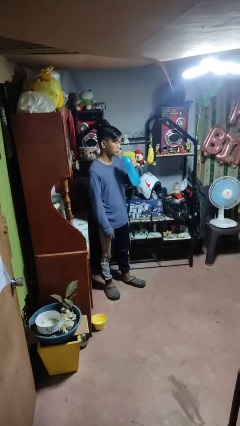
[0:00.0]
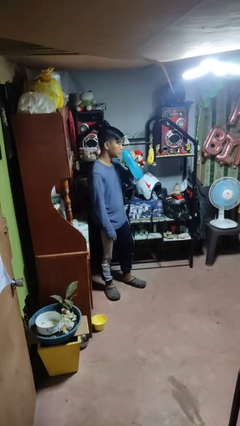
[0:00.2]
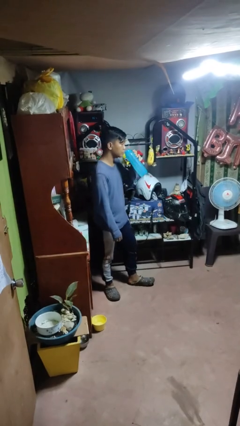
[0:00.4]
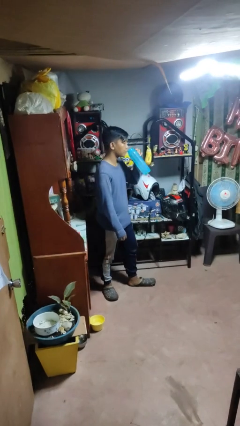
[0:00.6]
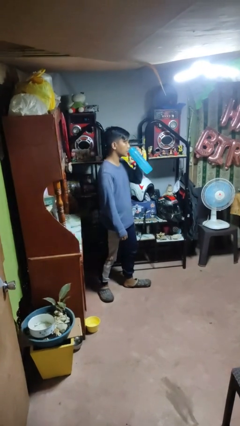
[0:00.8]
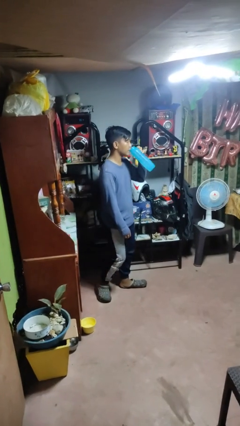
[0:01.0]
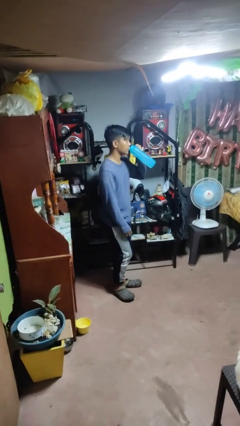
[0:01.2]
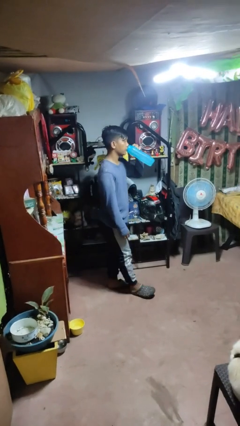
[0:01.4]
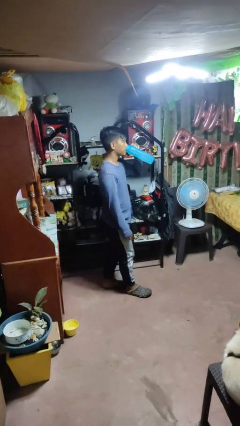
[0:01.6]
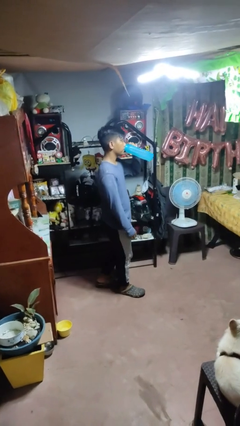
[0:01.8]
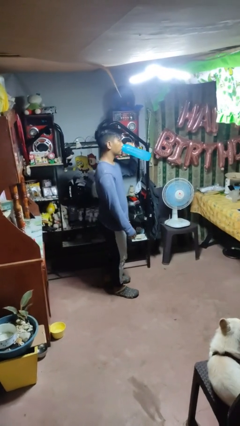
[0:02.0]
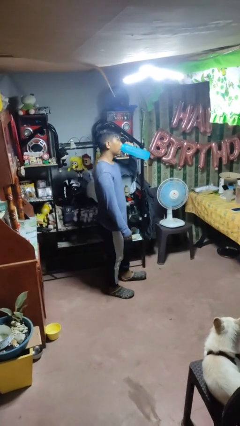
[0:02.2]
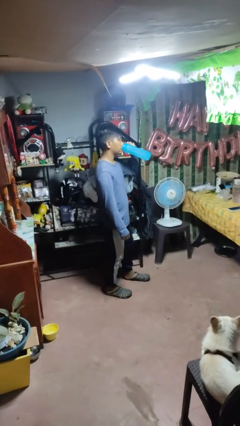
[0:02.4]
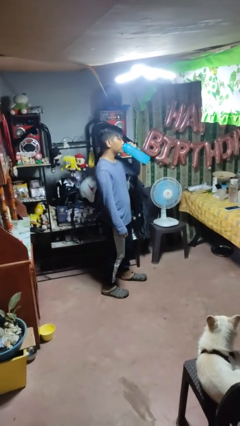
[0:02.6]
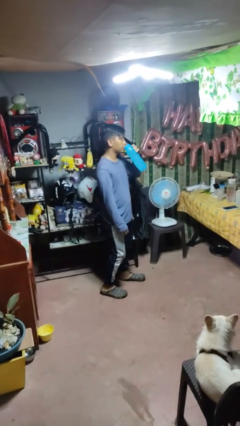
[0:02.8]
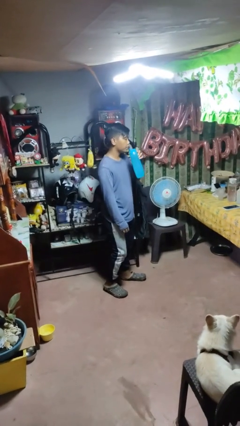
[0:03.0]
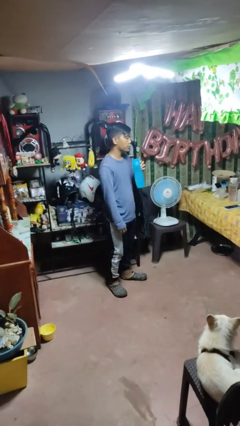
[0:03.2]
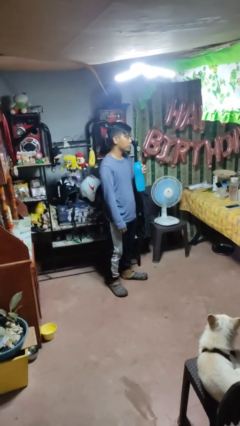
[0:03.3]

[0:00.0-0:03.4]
person drinks from bottle

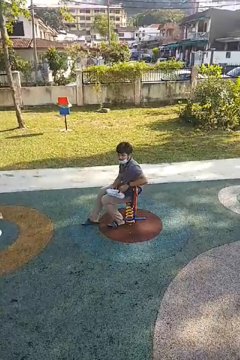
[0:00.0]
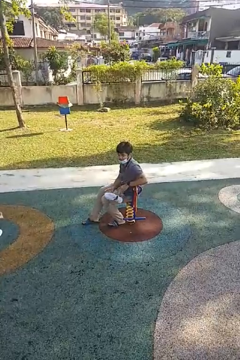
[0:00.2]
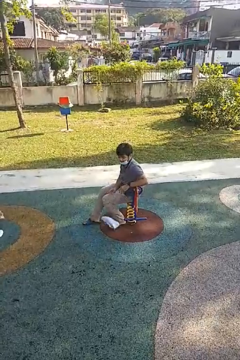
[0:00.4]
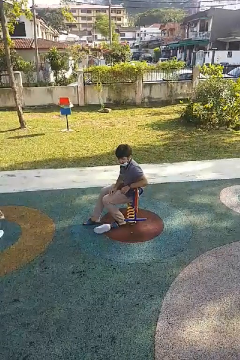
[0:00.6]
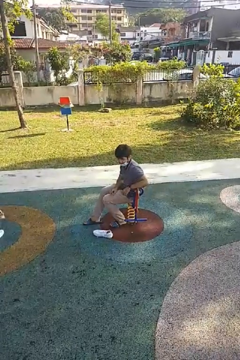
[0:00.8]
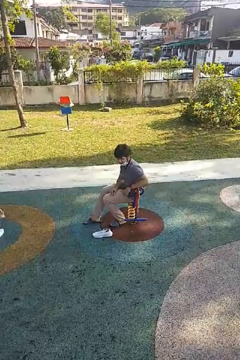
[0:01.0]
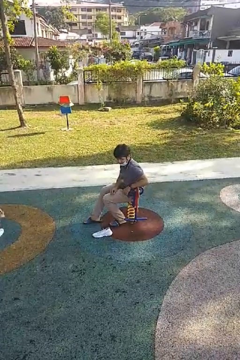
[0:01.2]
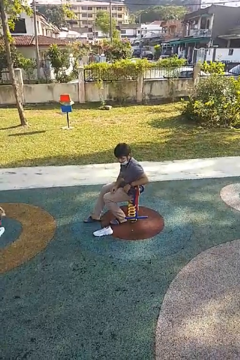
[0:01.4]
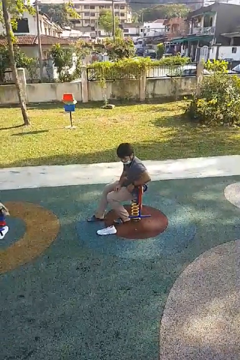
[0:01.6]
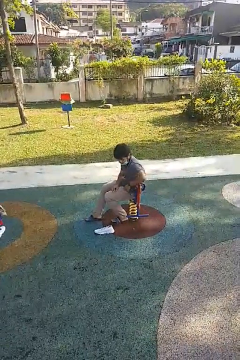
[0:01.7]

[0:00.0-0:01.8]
person drops object

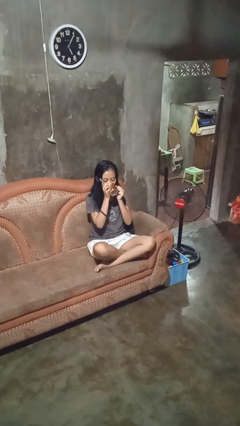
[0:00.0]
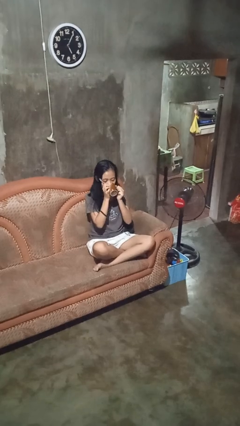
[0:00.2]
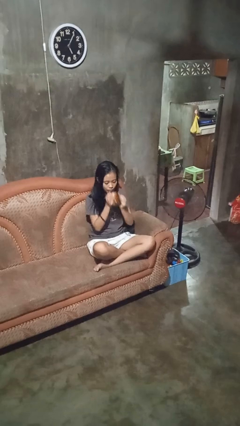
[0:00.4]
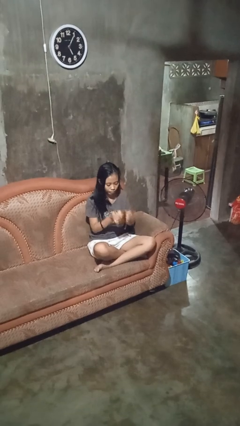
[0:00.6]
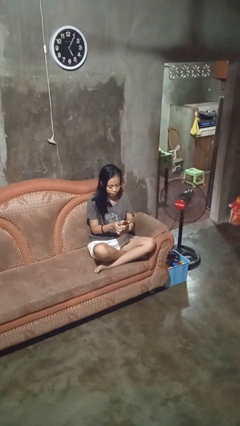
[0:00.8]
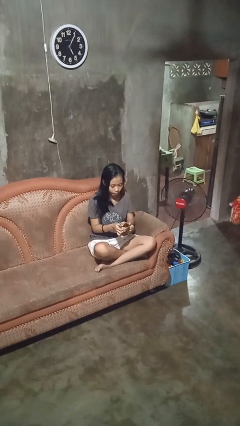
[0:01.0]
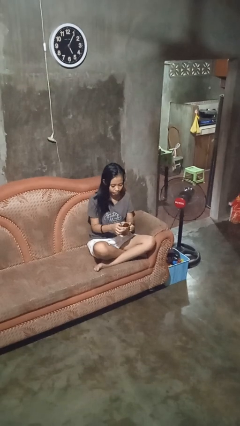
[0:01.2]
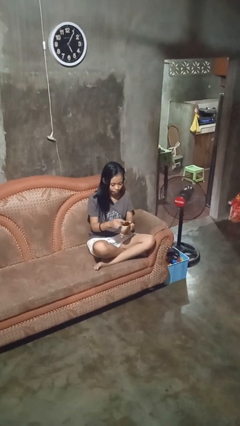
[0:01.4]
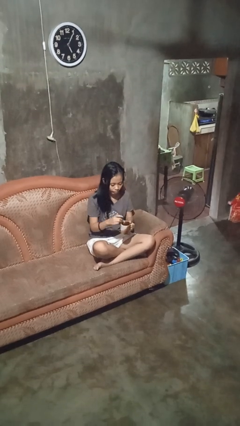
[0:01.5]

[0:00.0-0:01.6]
person stirs mug

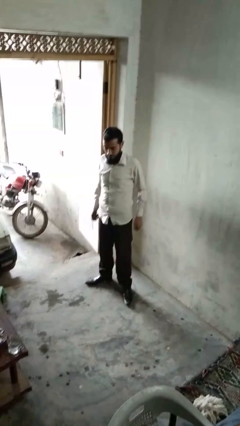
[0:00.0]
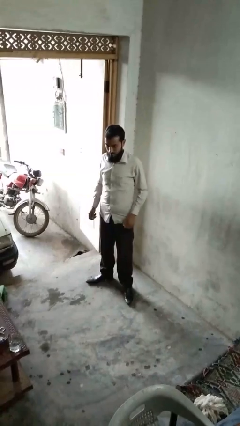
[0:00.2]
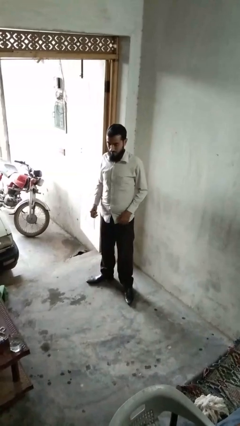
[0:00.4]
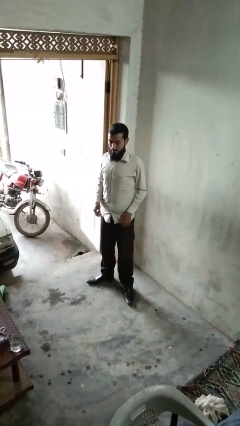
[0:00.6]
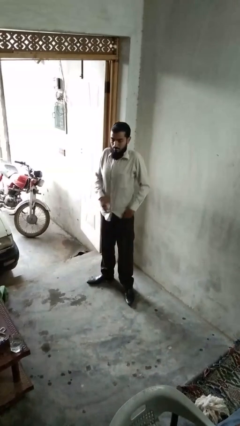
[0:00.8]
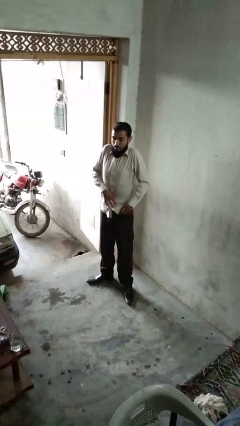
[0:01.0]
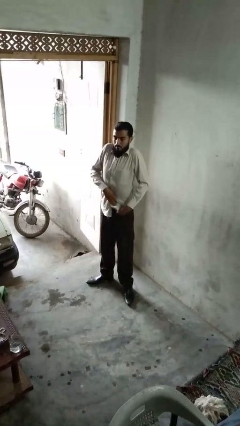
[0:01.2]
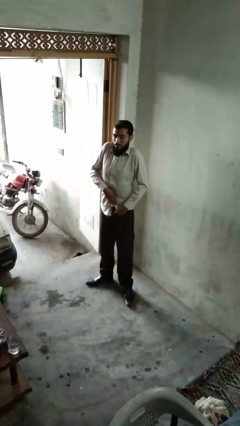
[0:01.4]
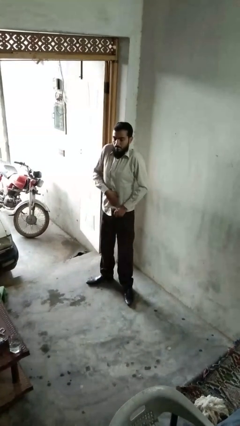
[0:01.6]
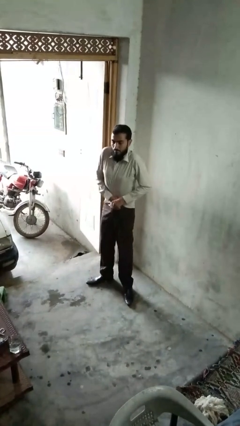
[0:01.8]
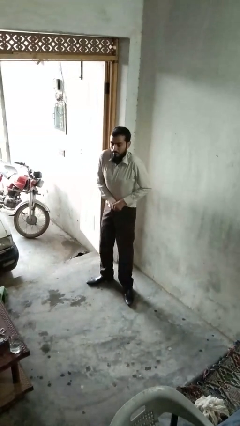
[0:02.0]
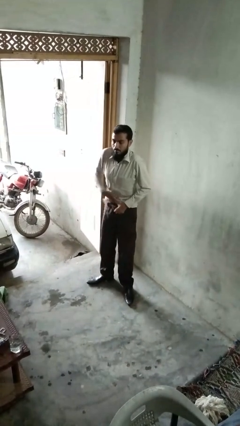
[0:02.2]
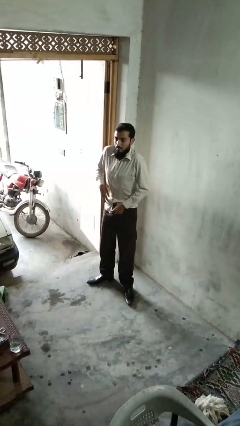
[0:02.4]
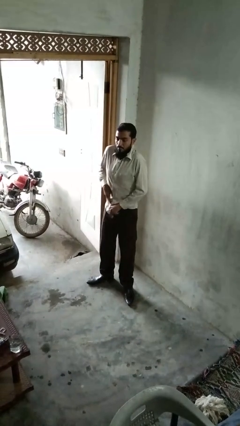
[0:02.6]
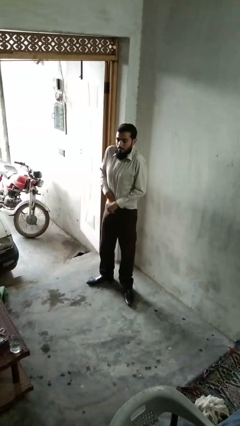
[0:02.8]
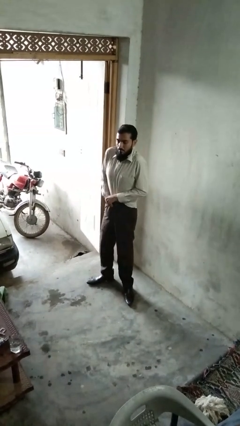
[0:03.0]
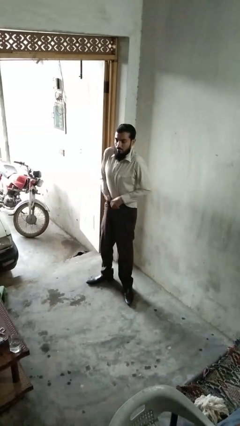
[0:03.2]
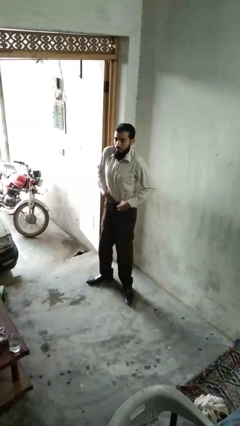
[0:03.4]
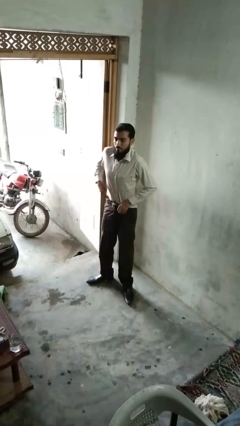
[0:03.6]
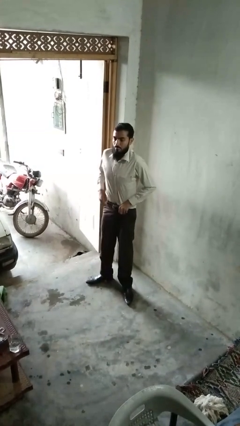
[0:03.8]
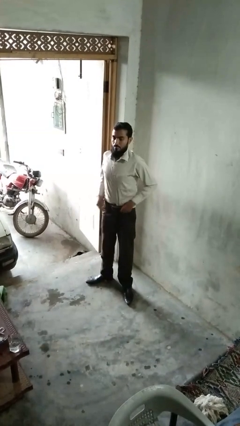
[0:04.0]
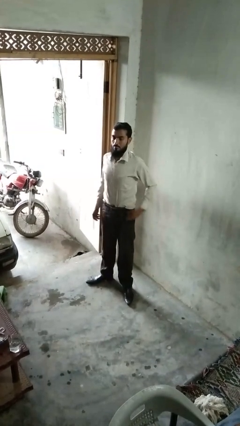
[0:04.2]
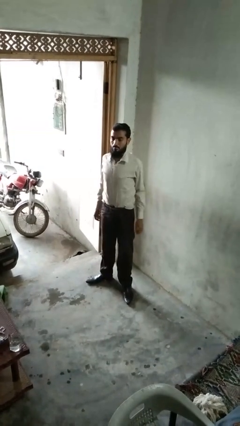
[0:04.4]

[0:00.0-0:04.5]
person tucks in shirt

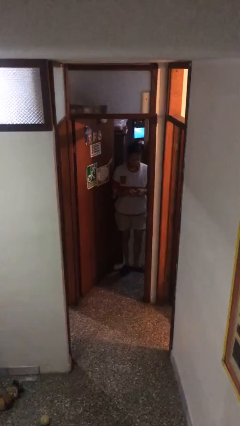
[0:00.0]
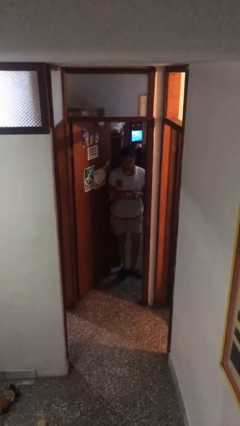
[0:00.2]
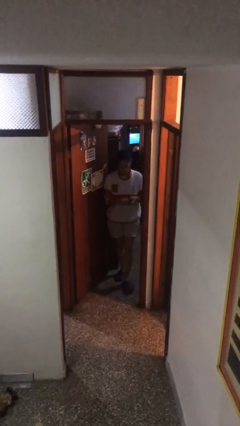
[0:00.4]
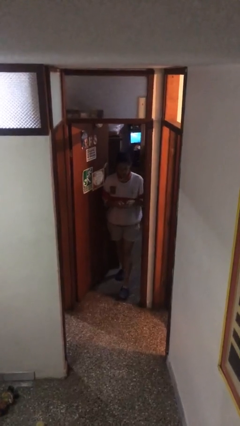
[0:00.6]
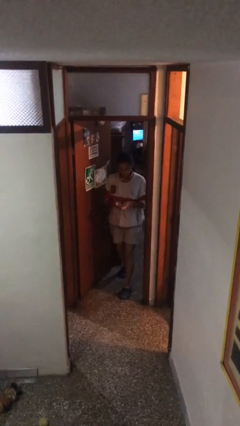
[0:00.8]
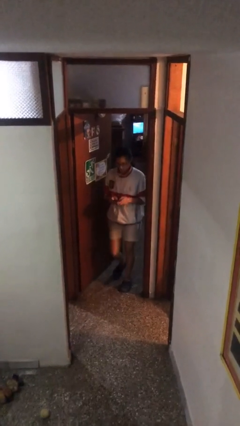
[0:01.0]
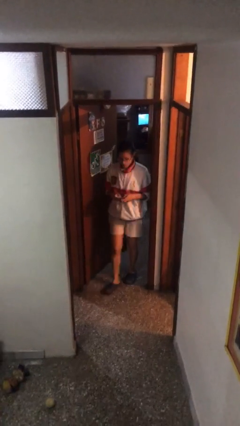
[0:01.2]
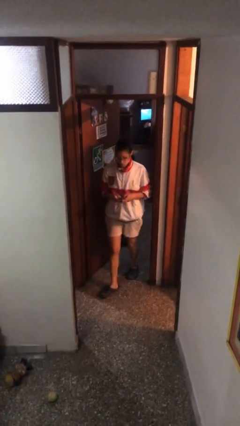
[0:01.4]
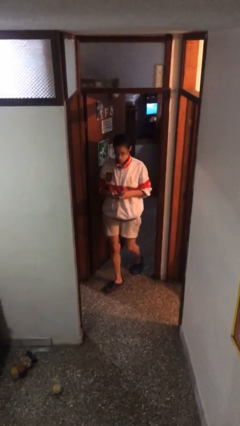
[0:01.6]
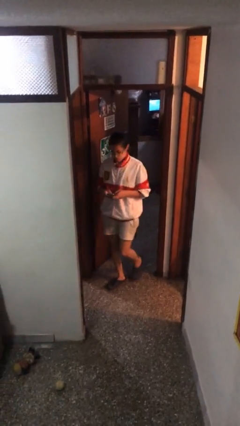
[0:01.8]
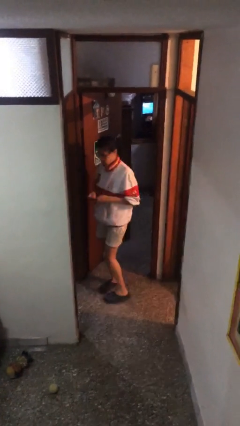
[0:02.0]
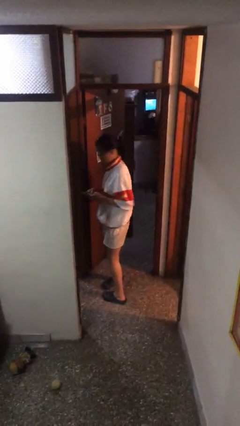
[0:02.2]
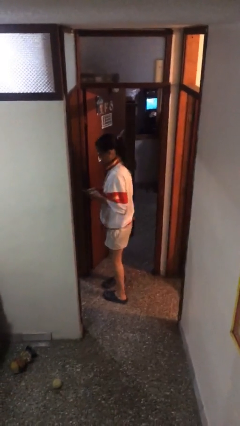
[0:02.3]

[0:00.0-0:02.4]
person enters scene through structure

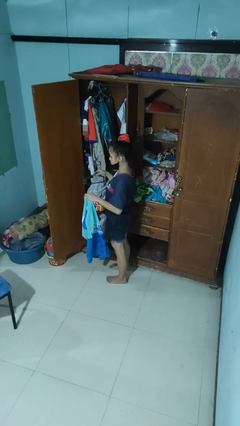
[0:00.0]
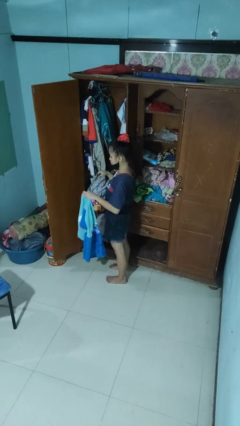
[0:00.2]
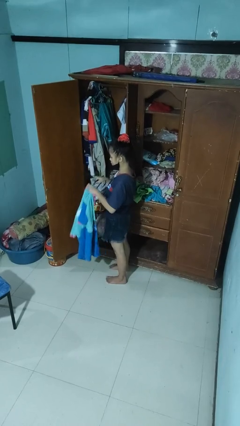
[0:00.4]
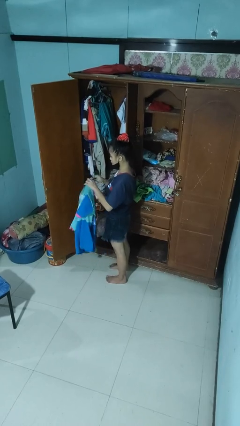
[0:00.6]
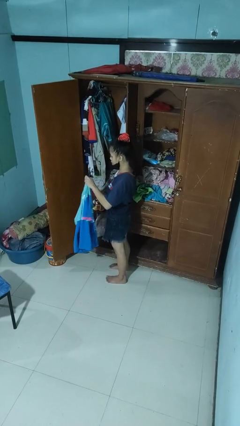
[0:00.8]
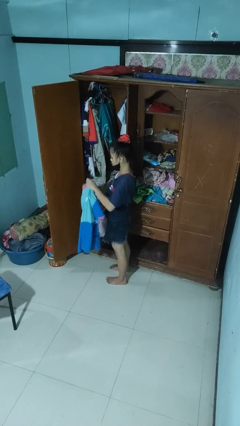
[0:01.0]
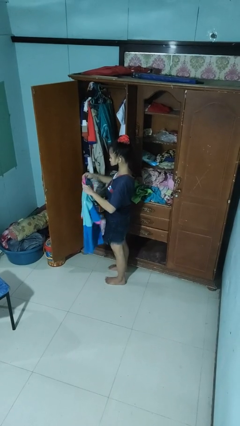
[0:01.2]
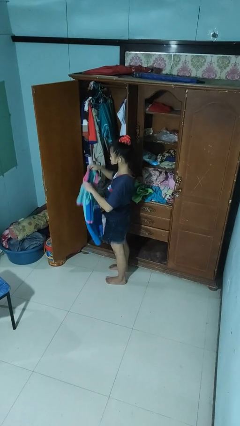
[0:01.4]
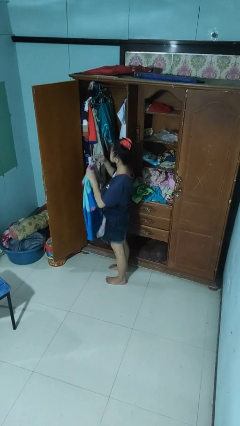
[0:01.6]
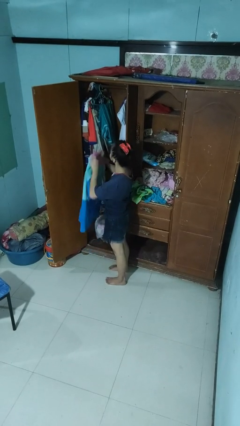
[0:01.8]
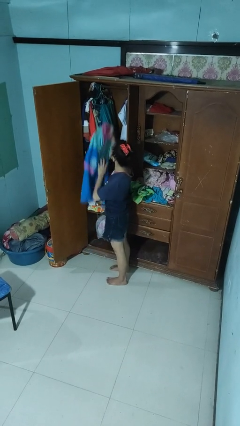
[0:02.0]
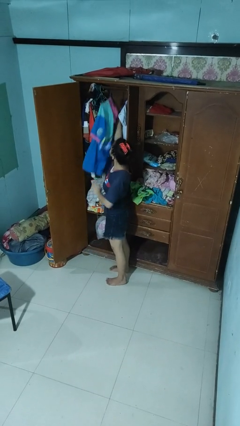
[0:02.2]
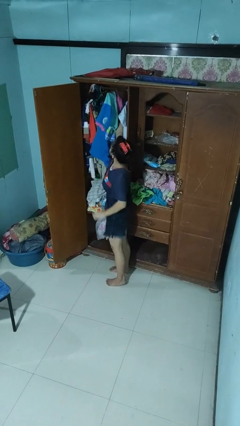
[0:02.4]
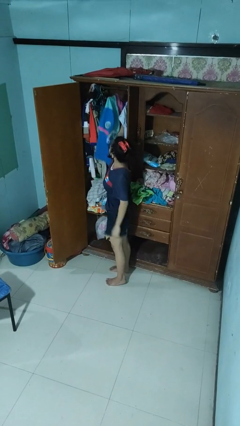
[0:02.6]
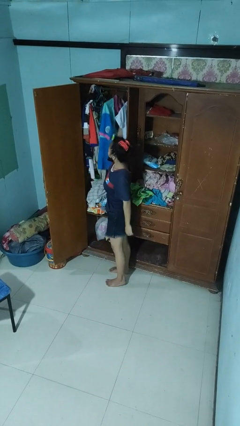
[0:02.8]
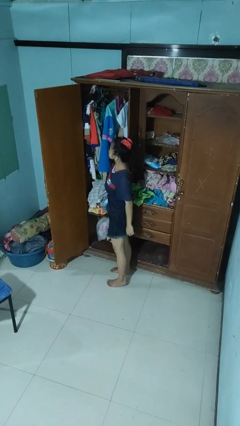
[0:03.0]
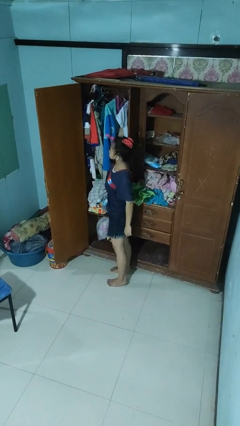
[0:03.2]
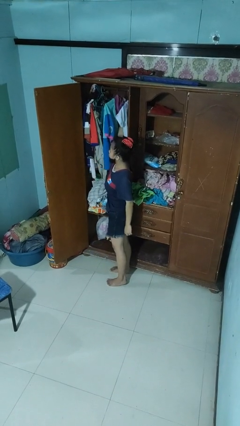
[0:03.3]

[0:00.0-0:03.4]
person puts clothes into closet

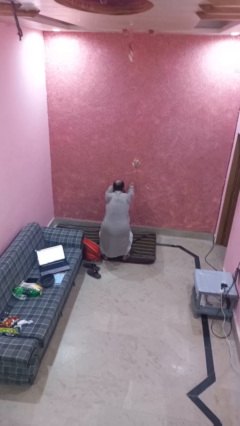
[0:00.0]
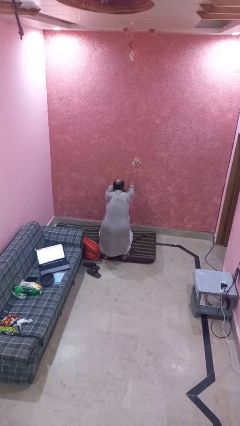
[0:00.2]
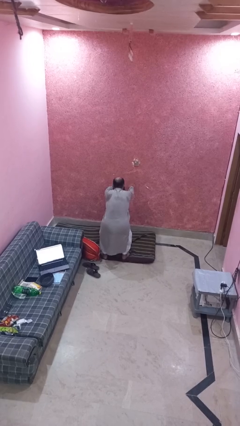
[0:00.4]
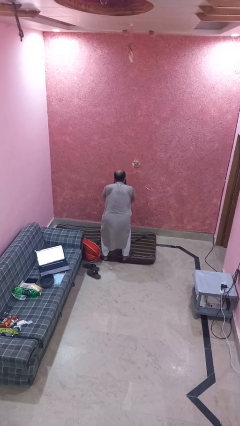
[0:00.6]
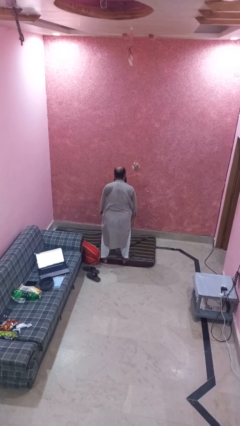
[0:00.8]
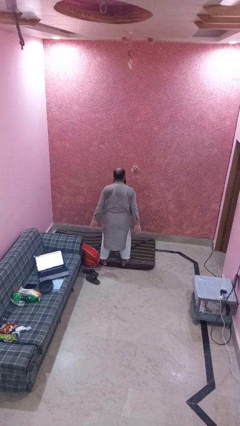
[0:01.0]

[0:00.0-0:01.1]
person stands up
